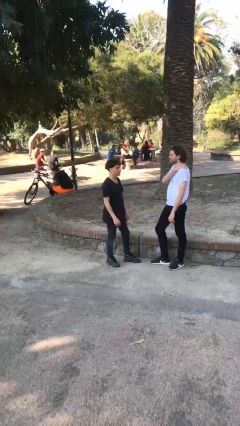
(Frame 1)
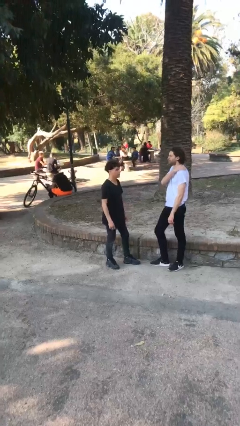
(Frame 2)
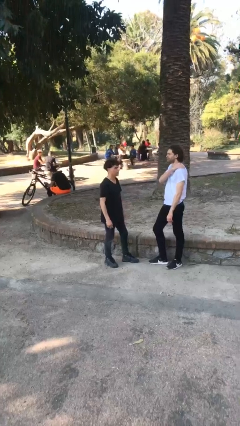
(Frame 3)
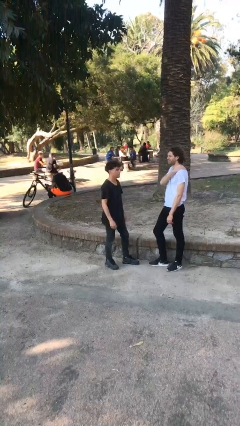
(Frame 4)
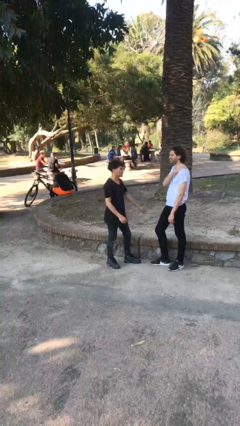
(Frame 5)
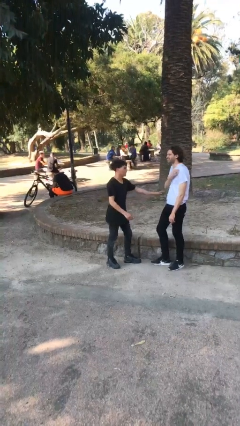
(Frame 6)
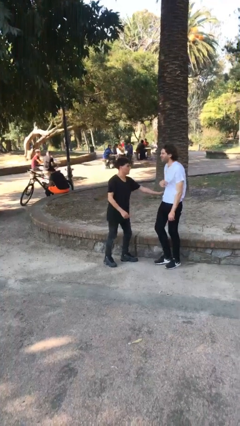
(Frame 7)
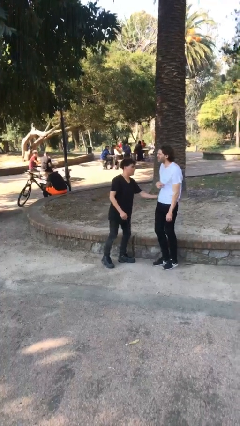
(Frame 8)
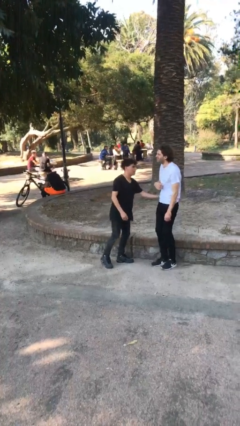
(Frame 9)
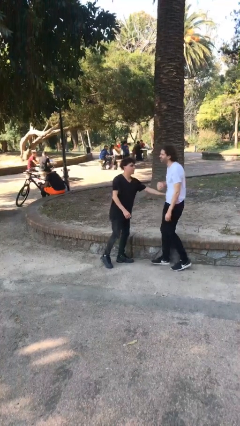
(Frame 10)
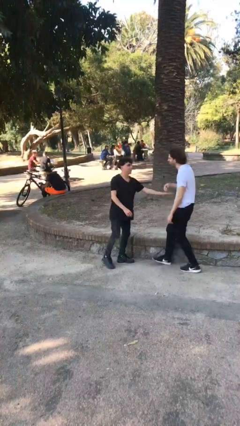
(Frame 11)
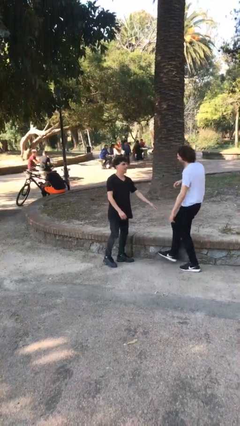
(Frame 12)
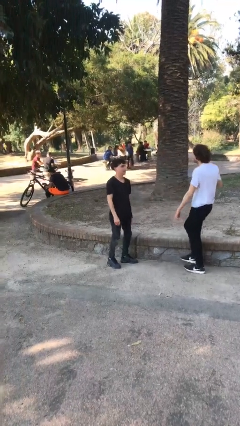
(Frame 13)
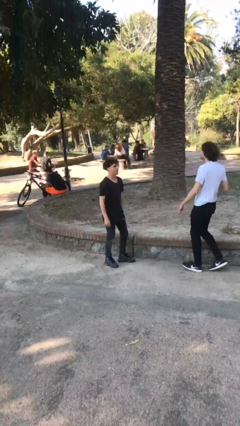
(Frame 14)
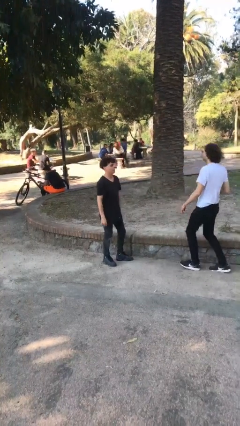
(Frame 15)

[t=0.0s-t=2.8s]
person shoves person

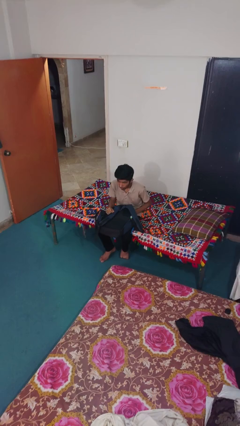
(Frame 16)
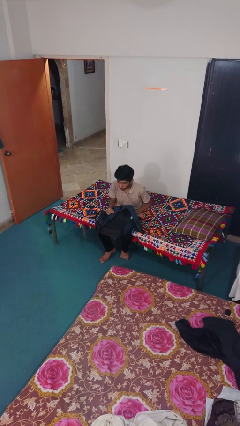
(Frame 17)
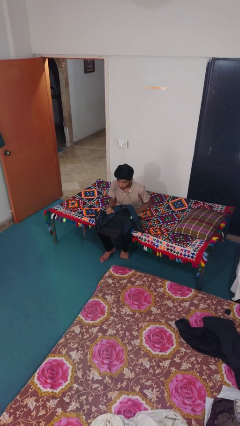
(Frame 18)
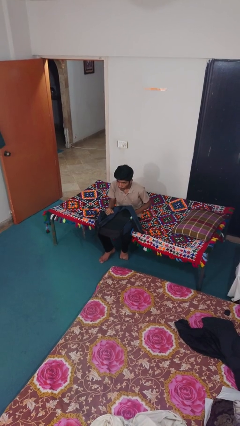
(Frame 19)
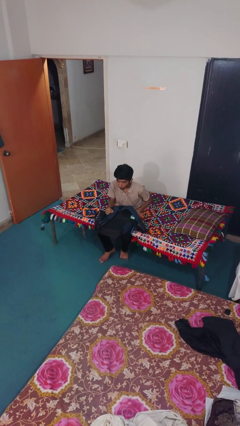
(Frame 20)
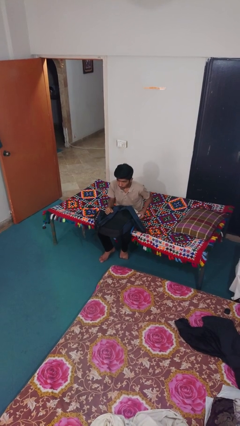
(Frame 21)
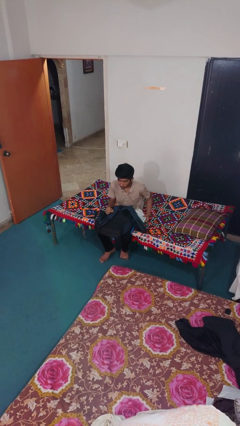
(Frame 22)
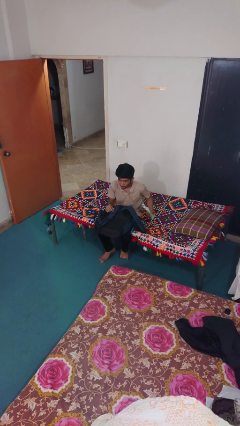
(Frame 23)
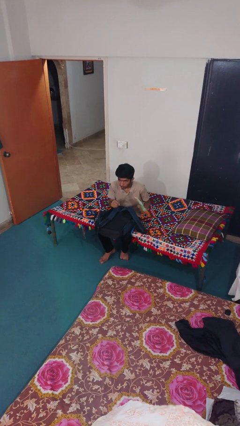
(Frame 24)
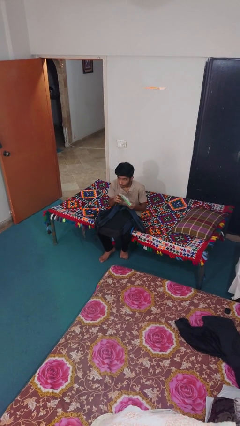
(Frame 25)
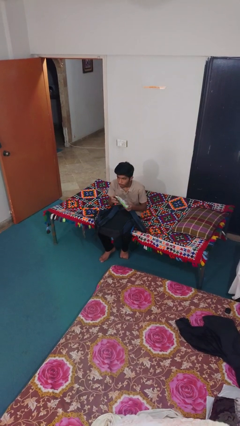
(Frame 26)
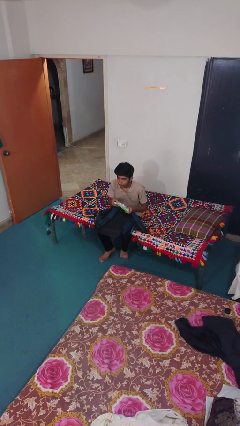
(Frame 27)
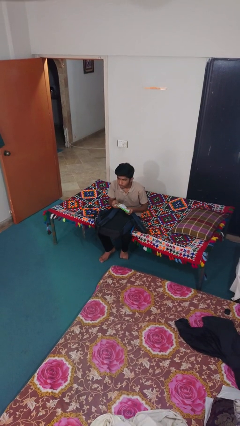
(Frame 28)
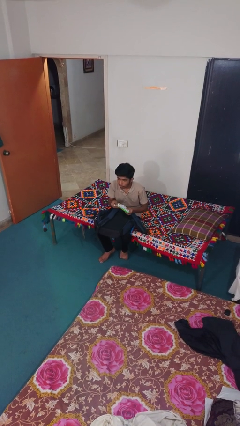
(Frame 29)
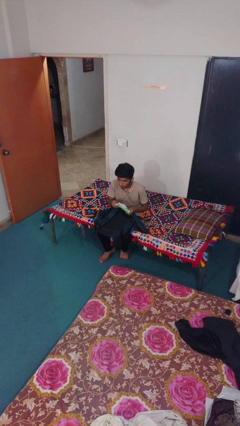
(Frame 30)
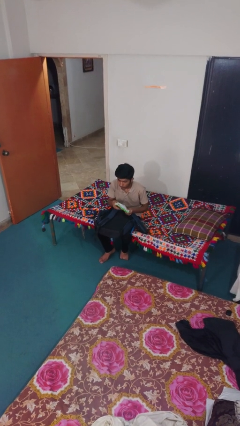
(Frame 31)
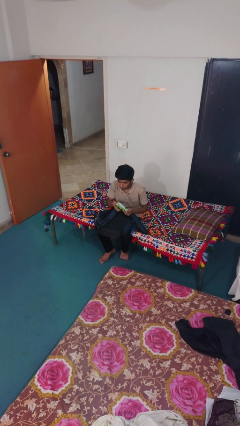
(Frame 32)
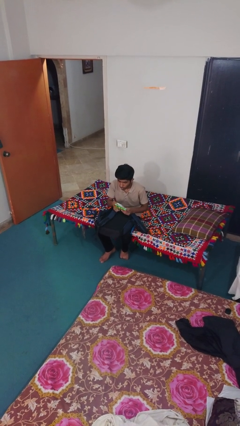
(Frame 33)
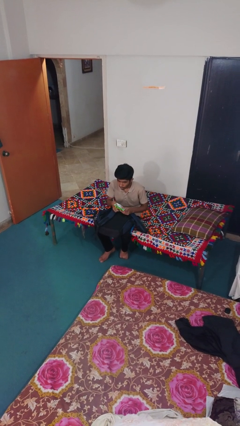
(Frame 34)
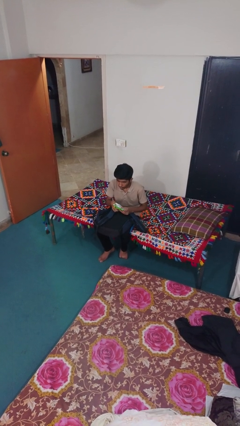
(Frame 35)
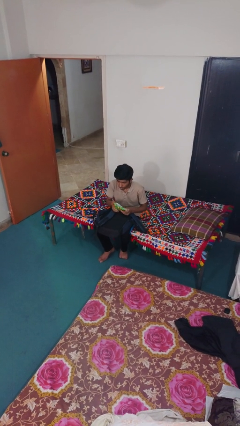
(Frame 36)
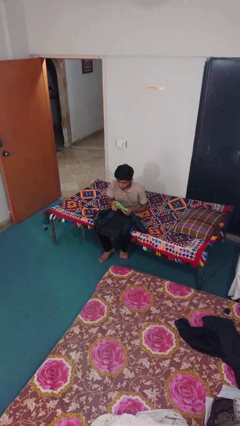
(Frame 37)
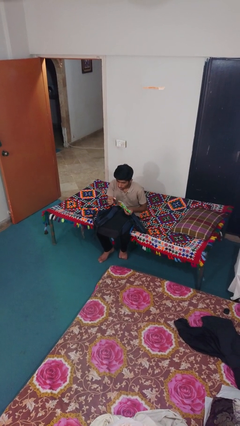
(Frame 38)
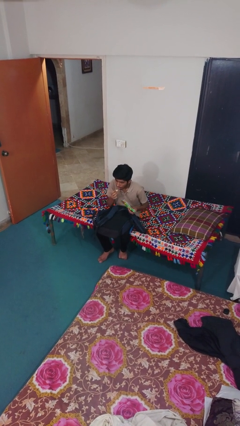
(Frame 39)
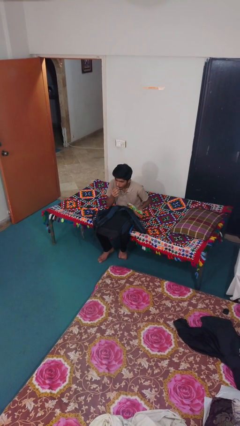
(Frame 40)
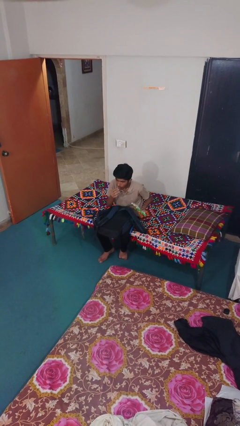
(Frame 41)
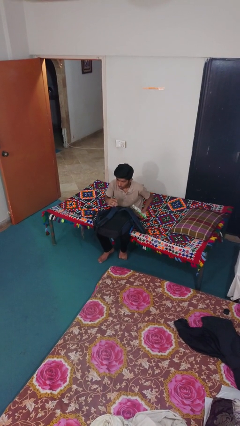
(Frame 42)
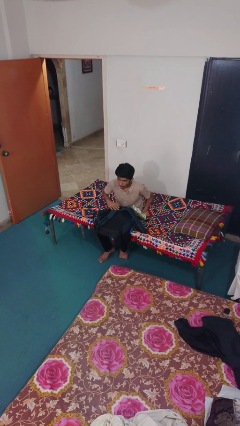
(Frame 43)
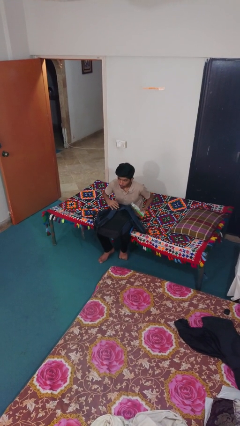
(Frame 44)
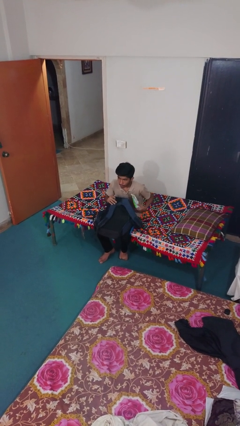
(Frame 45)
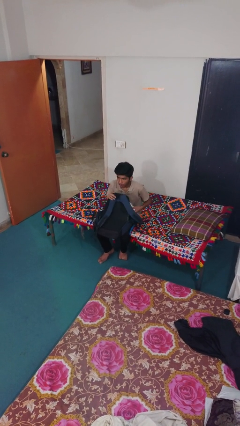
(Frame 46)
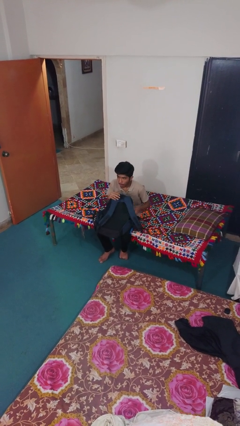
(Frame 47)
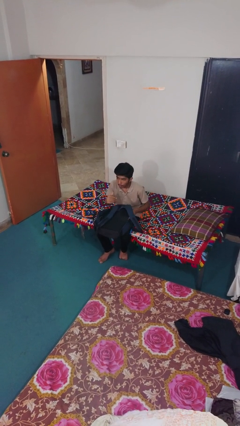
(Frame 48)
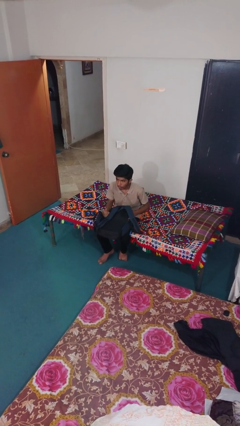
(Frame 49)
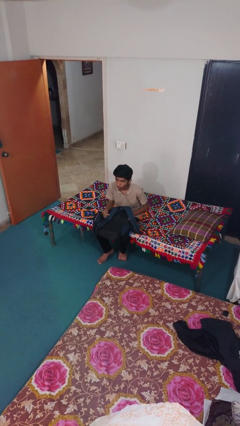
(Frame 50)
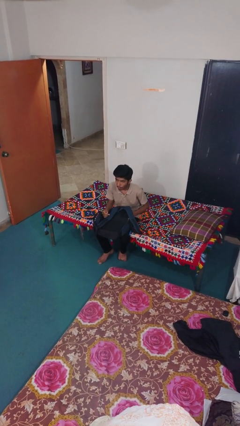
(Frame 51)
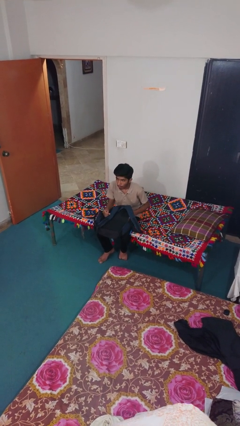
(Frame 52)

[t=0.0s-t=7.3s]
person eats snack from bag

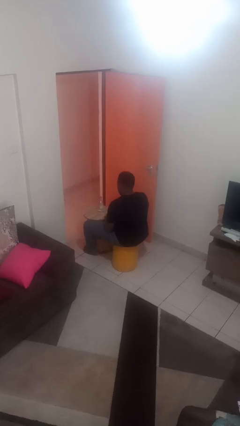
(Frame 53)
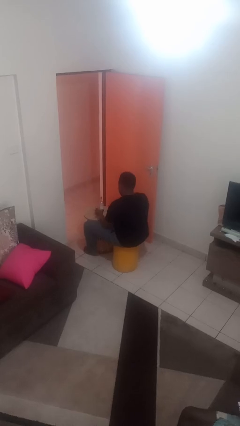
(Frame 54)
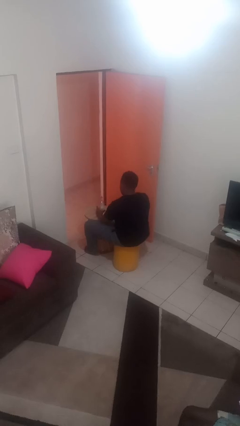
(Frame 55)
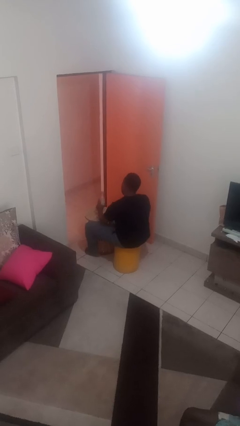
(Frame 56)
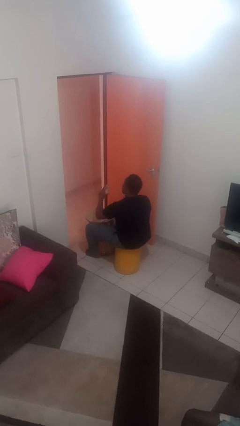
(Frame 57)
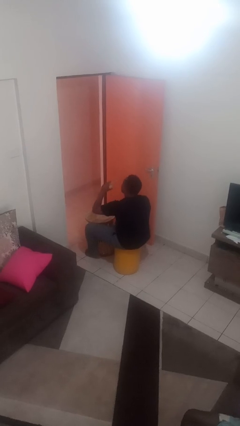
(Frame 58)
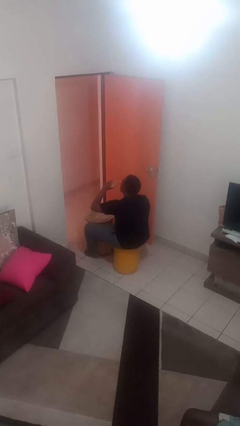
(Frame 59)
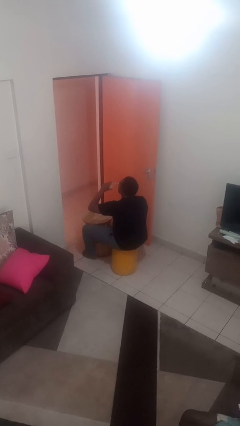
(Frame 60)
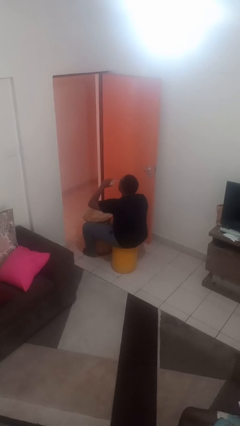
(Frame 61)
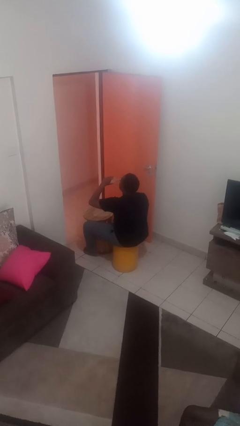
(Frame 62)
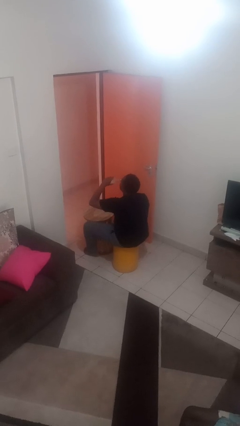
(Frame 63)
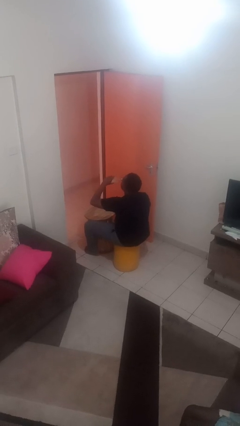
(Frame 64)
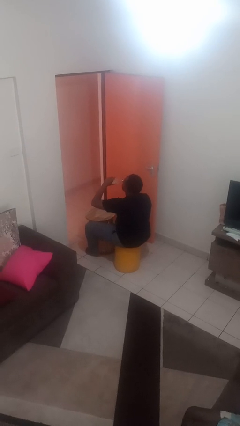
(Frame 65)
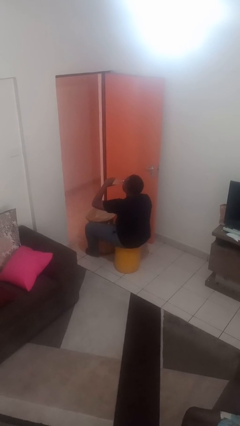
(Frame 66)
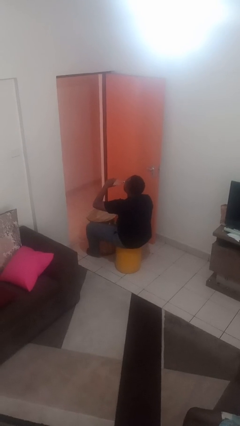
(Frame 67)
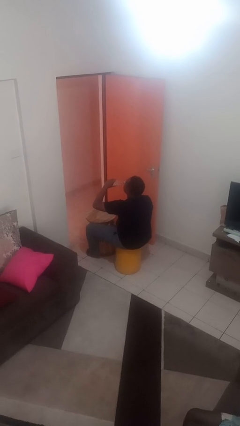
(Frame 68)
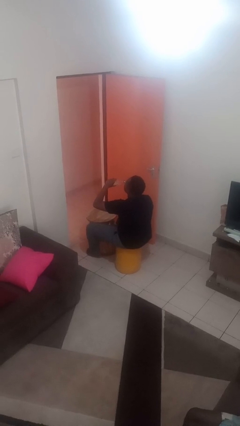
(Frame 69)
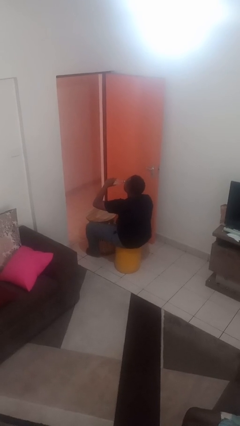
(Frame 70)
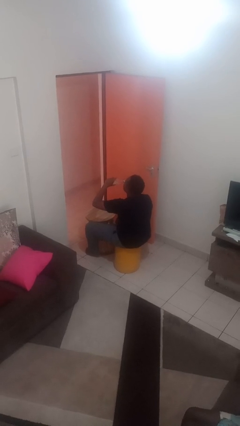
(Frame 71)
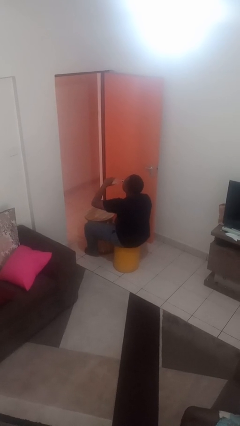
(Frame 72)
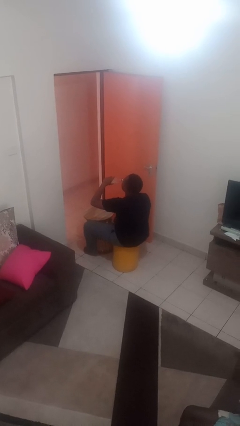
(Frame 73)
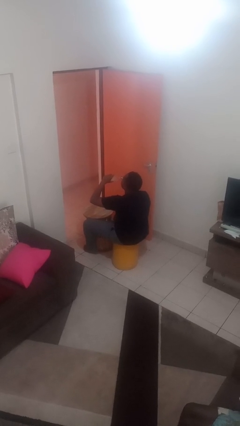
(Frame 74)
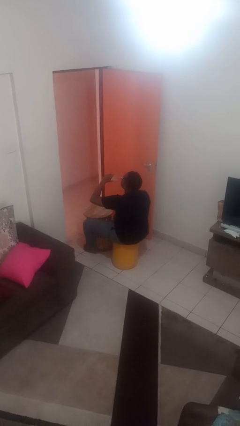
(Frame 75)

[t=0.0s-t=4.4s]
person drinks from bottle

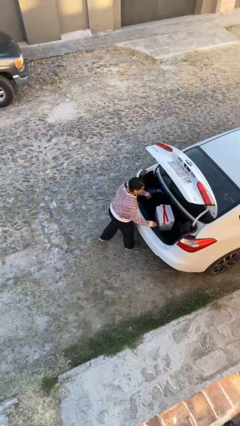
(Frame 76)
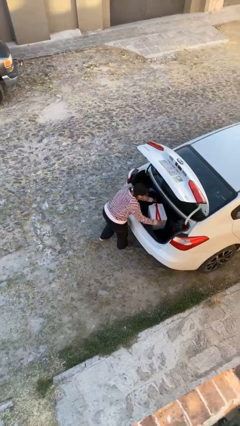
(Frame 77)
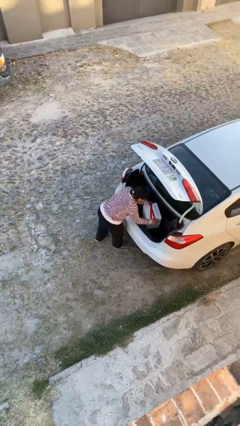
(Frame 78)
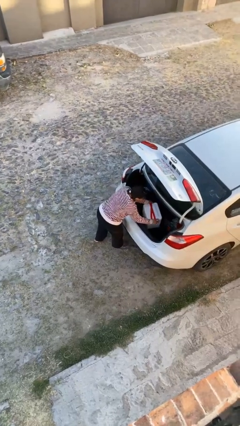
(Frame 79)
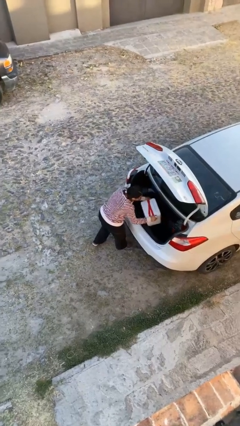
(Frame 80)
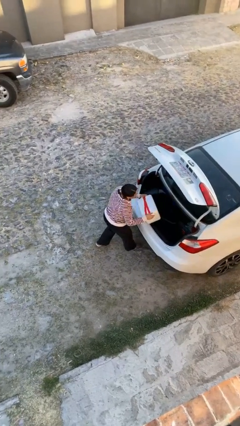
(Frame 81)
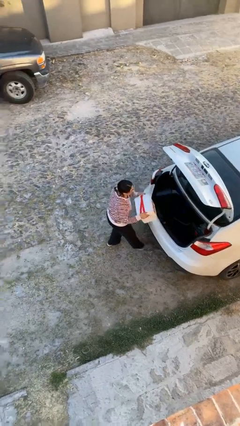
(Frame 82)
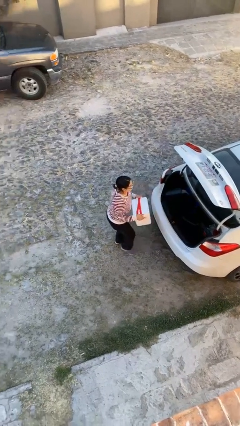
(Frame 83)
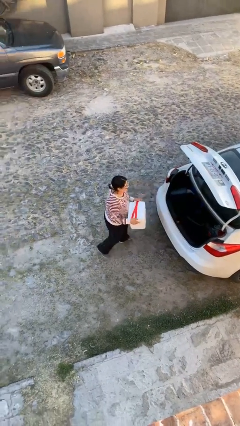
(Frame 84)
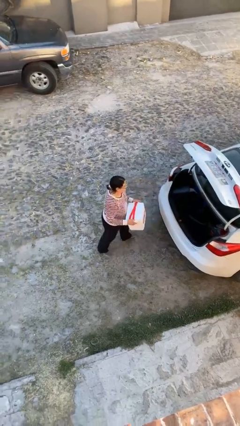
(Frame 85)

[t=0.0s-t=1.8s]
person unloads car

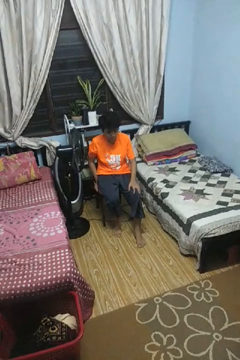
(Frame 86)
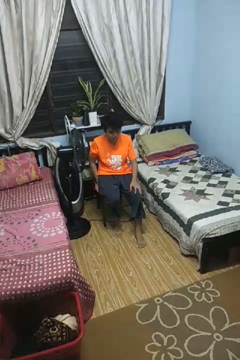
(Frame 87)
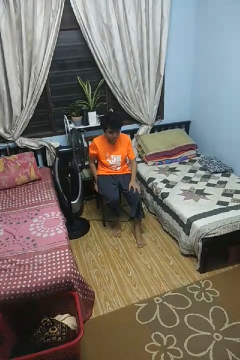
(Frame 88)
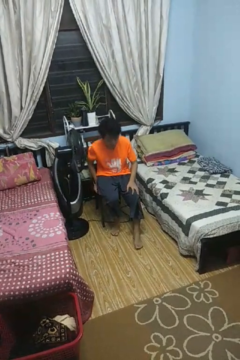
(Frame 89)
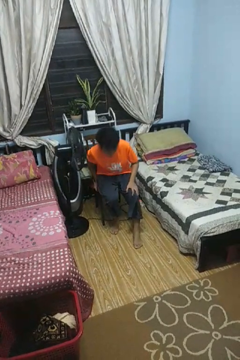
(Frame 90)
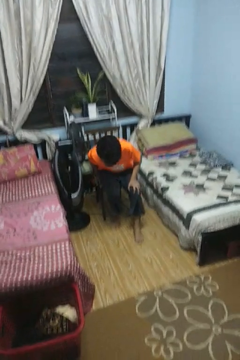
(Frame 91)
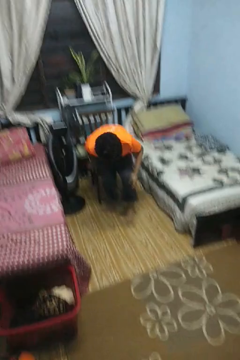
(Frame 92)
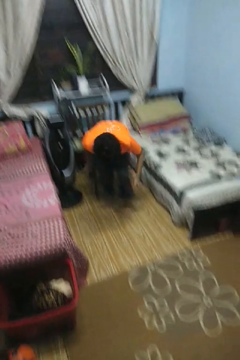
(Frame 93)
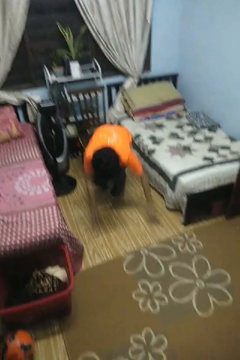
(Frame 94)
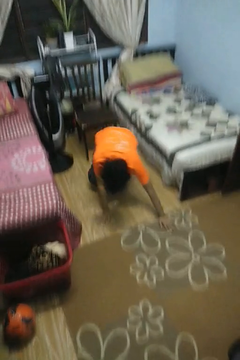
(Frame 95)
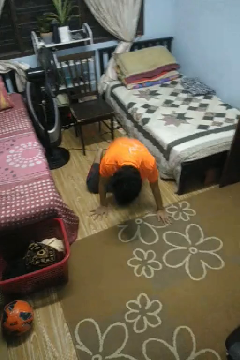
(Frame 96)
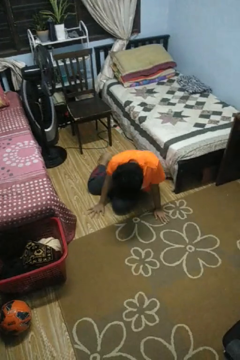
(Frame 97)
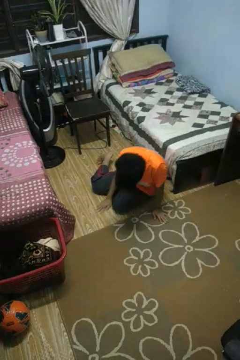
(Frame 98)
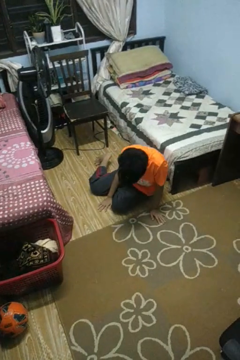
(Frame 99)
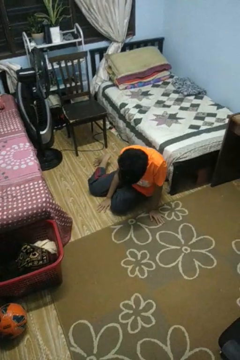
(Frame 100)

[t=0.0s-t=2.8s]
person falls from chair
